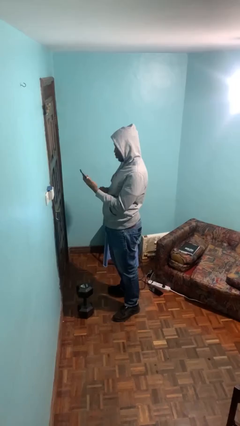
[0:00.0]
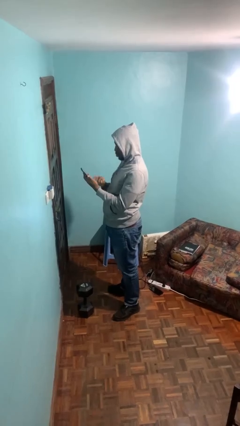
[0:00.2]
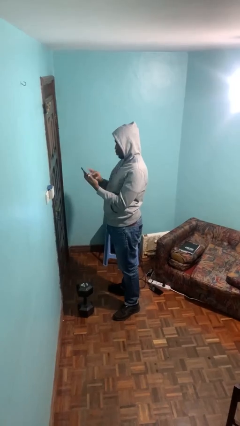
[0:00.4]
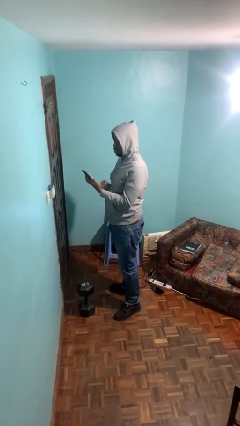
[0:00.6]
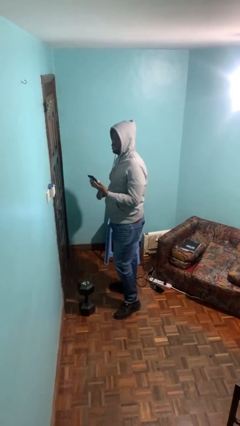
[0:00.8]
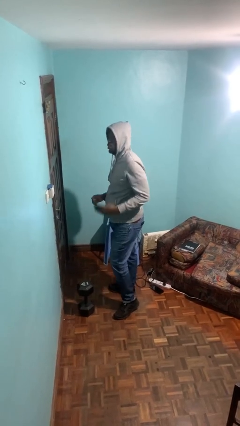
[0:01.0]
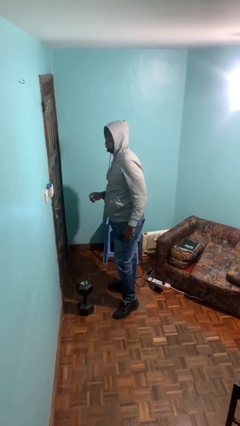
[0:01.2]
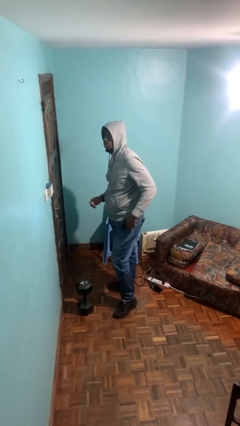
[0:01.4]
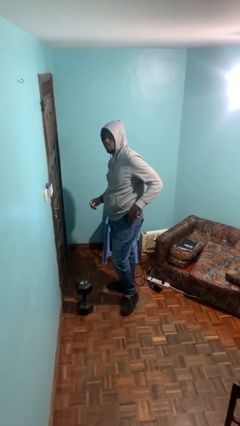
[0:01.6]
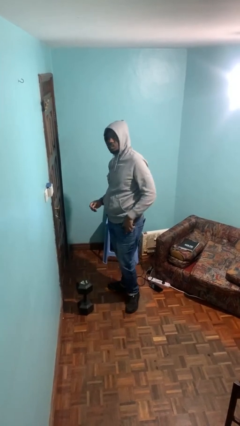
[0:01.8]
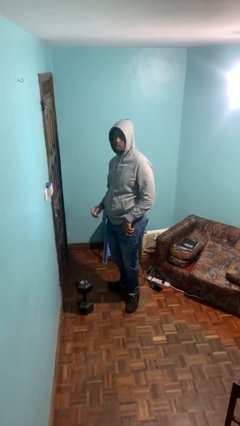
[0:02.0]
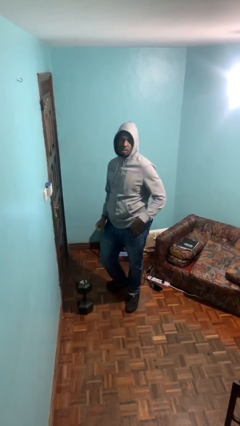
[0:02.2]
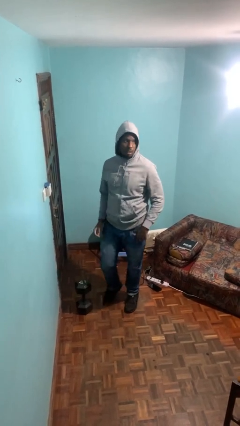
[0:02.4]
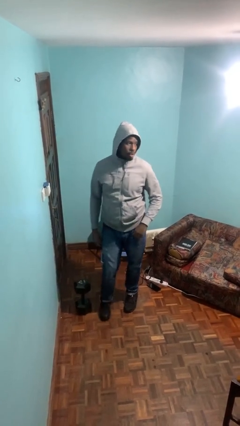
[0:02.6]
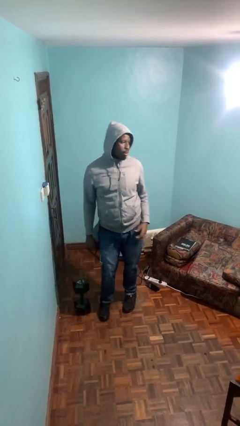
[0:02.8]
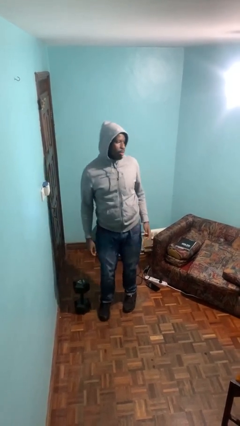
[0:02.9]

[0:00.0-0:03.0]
person puts phone into pocket

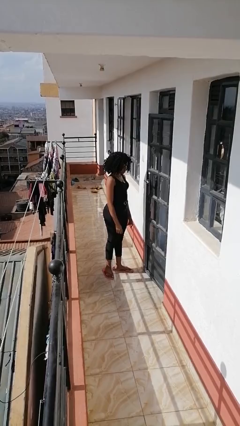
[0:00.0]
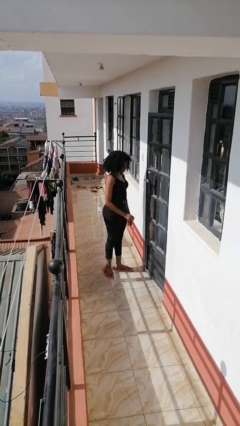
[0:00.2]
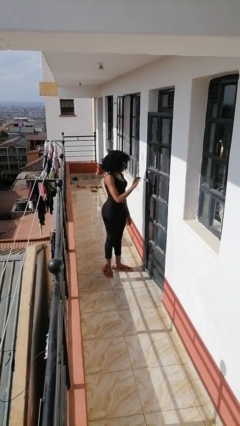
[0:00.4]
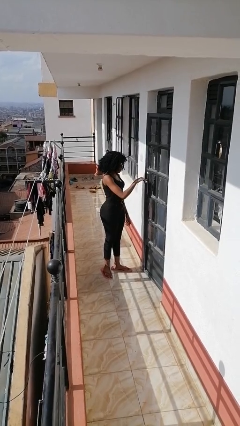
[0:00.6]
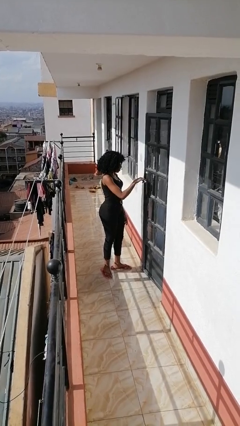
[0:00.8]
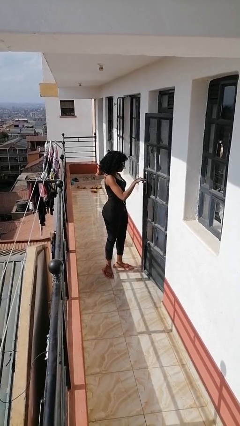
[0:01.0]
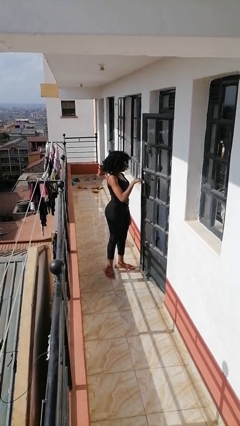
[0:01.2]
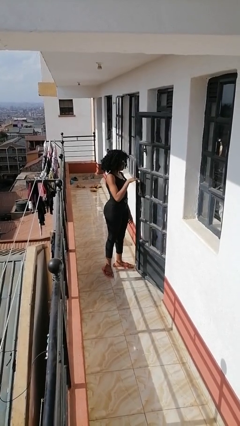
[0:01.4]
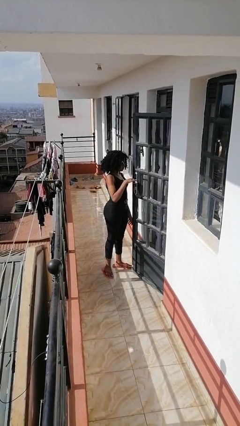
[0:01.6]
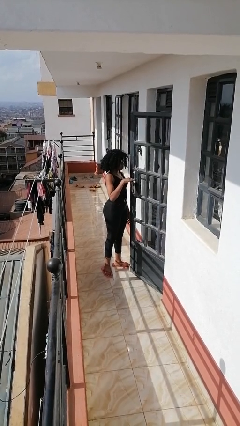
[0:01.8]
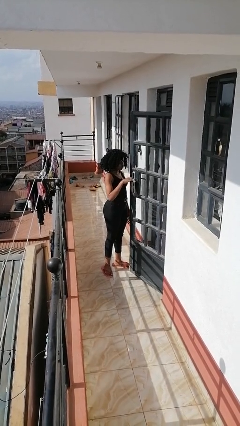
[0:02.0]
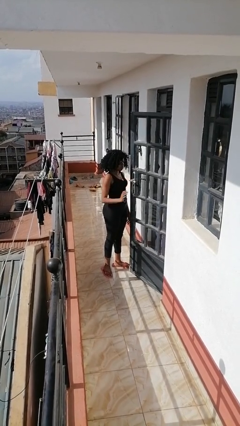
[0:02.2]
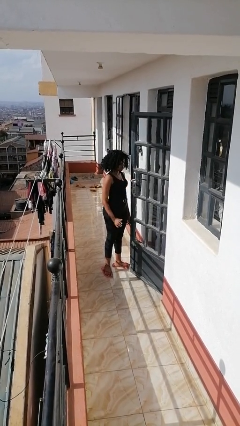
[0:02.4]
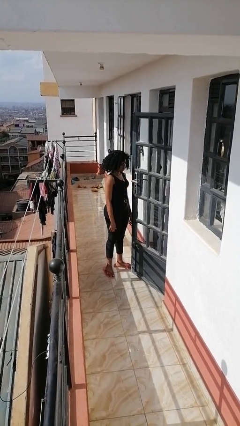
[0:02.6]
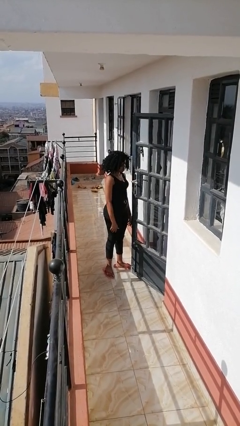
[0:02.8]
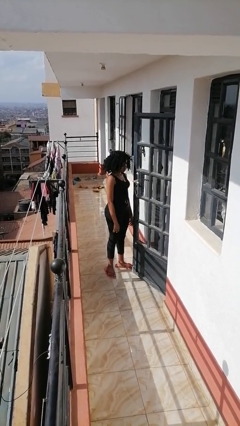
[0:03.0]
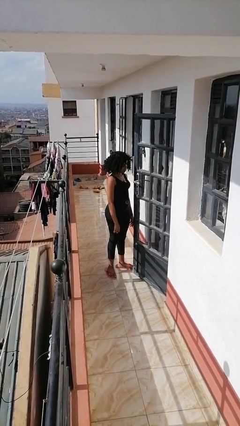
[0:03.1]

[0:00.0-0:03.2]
person opens facility door

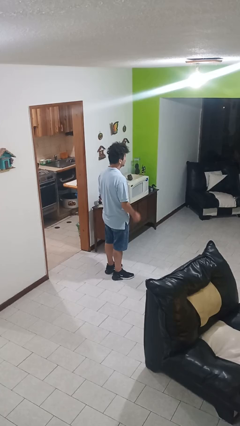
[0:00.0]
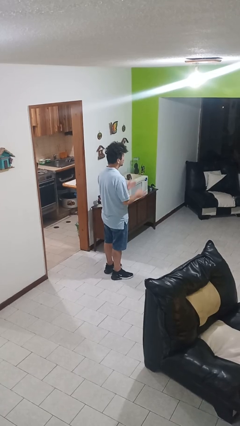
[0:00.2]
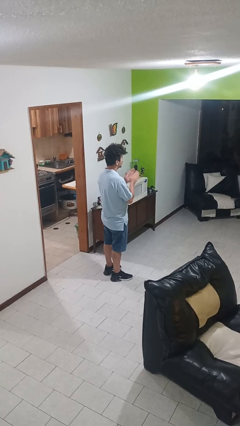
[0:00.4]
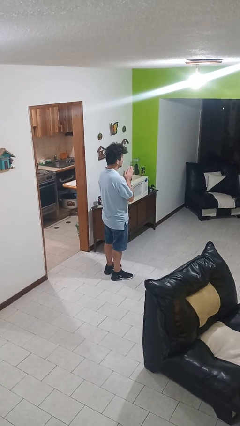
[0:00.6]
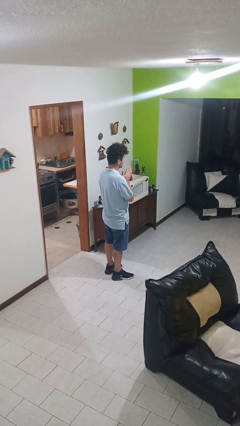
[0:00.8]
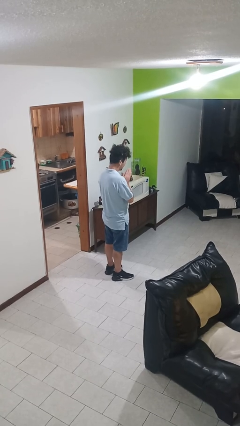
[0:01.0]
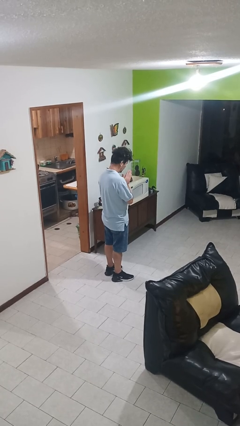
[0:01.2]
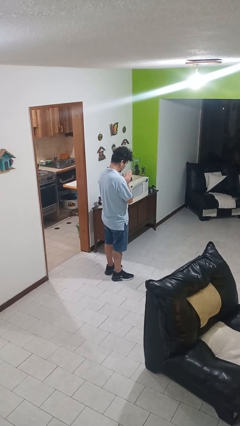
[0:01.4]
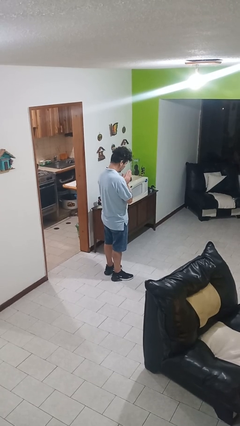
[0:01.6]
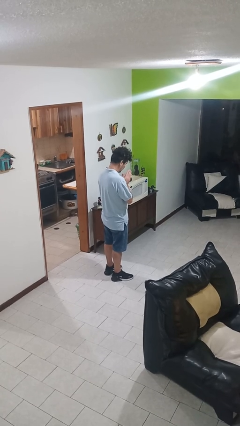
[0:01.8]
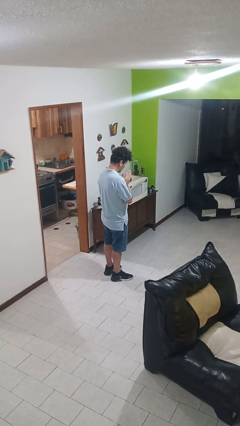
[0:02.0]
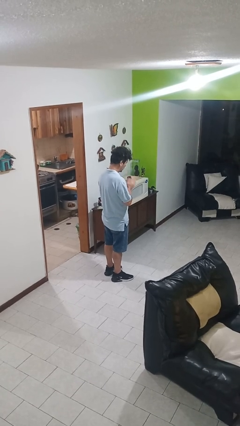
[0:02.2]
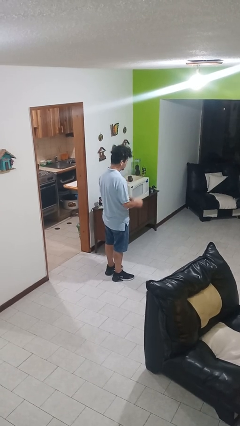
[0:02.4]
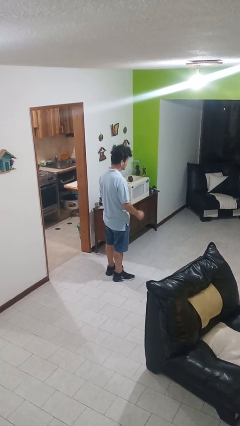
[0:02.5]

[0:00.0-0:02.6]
person prays

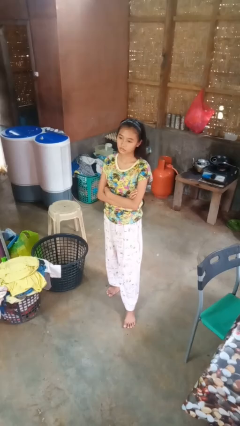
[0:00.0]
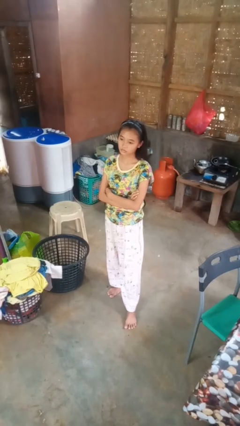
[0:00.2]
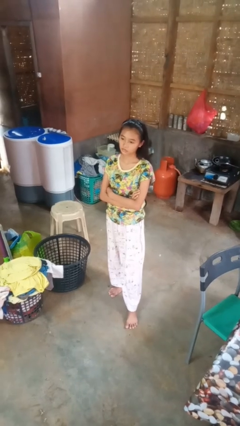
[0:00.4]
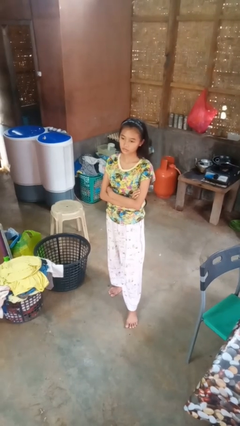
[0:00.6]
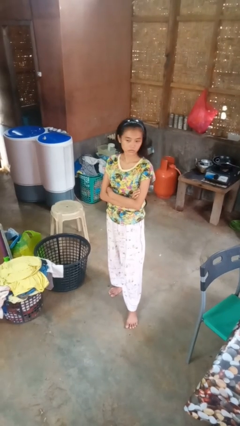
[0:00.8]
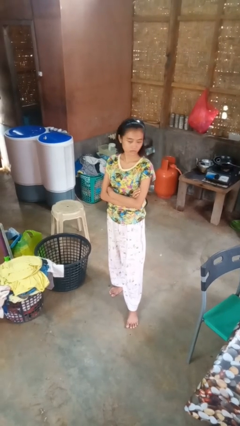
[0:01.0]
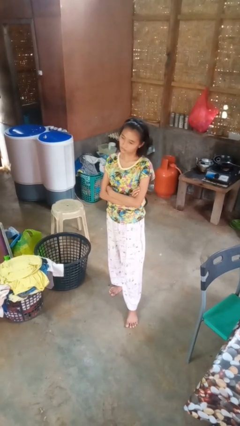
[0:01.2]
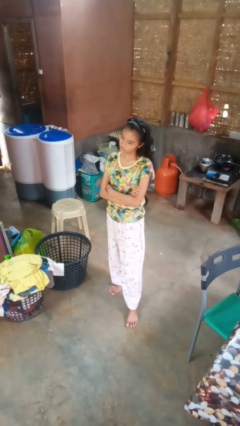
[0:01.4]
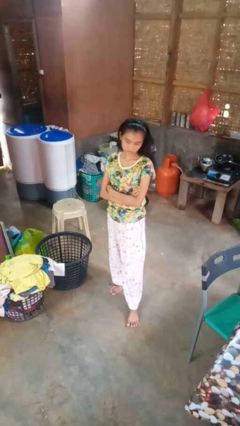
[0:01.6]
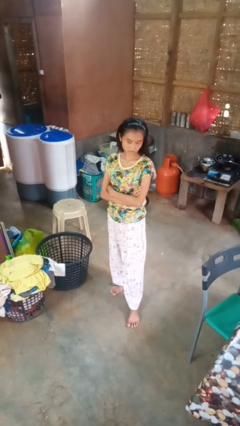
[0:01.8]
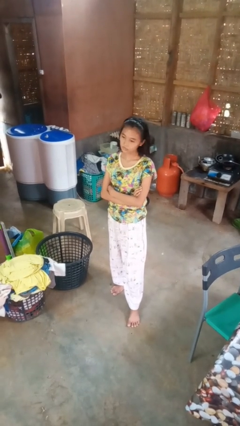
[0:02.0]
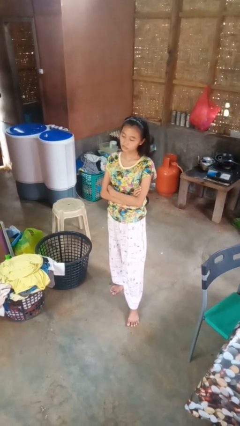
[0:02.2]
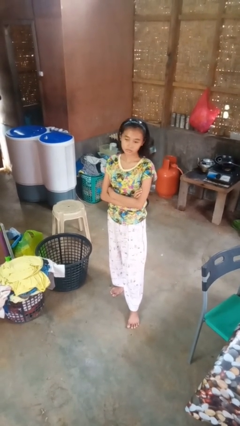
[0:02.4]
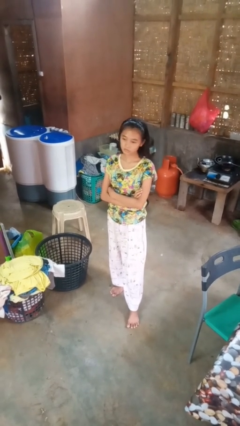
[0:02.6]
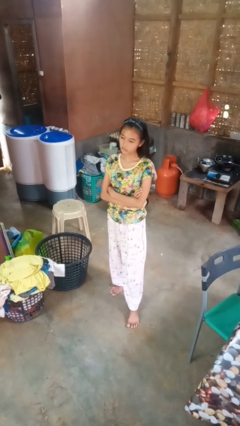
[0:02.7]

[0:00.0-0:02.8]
person shakes head

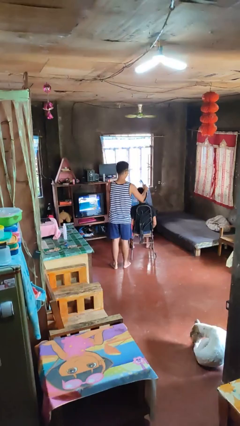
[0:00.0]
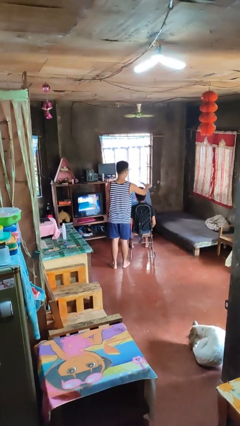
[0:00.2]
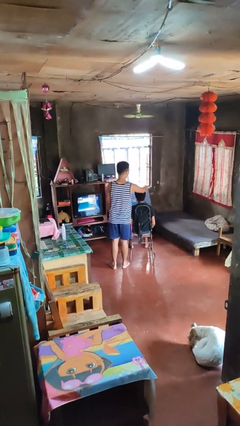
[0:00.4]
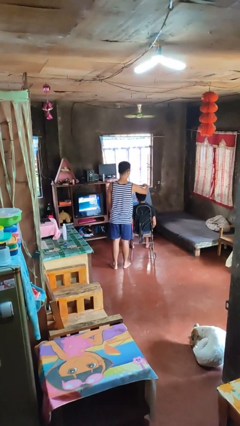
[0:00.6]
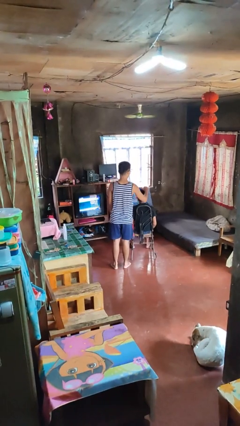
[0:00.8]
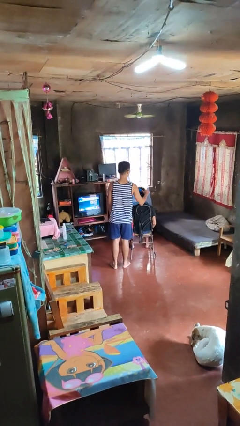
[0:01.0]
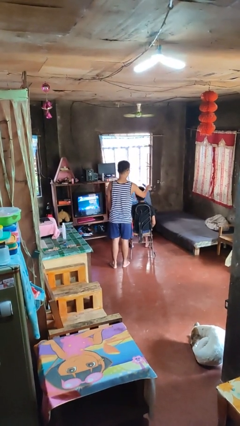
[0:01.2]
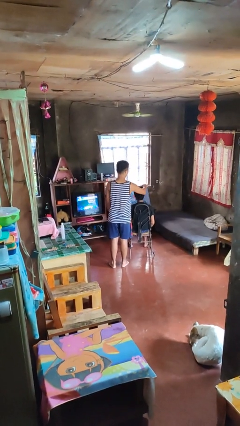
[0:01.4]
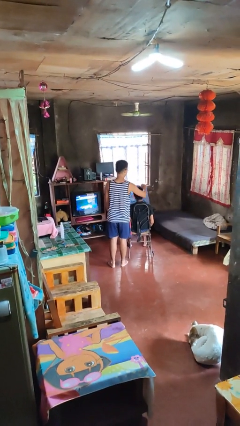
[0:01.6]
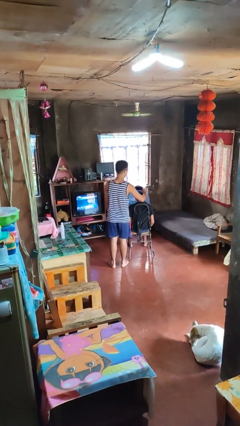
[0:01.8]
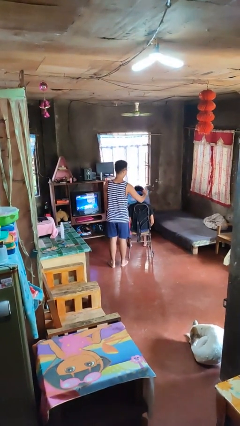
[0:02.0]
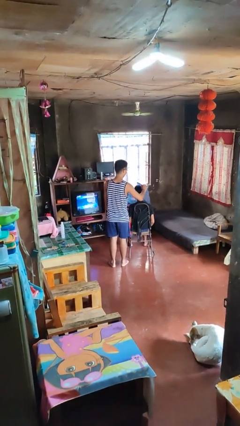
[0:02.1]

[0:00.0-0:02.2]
person brushes hair of person

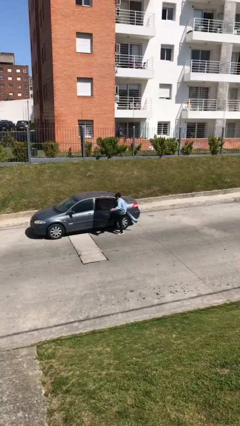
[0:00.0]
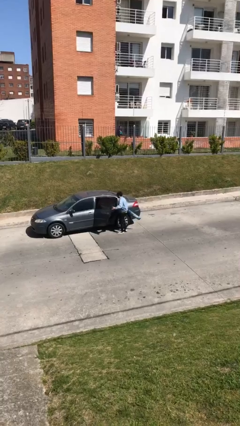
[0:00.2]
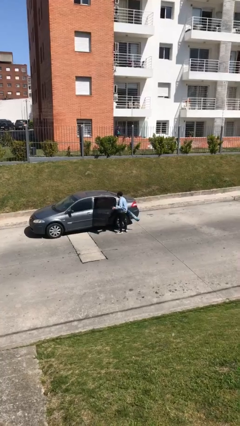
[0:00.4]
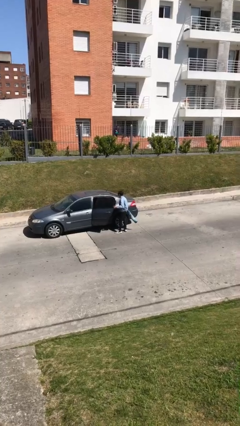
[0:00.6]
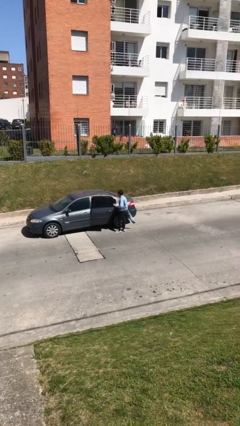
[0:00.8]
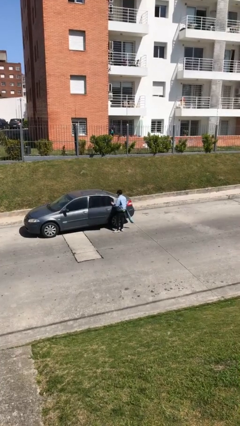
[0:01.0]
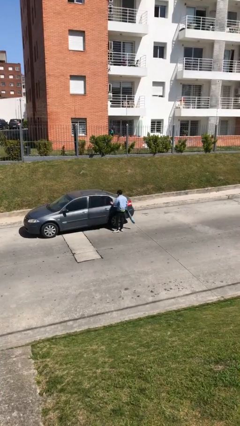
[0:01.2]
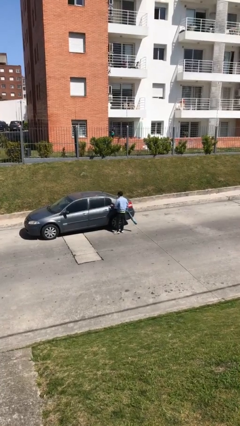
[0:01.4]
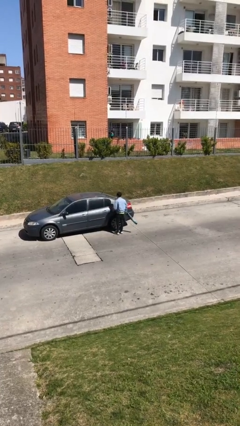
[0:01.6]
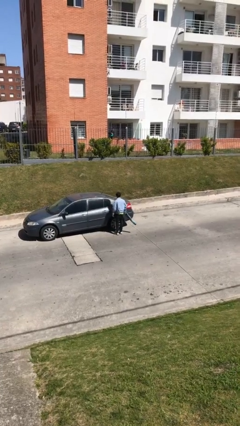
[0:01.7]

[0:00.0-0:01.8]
person closes car door

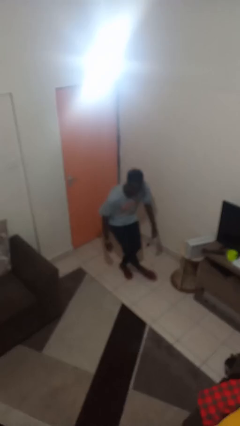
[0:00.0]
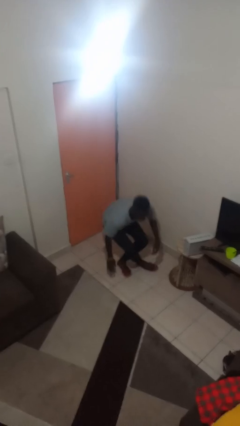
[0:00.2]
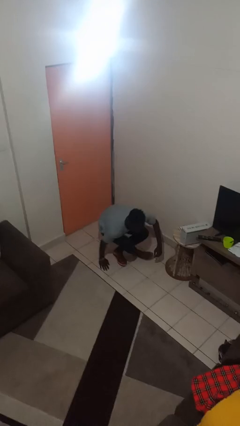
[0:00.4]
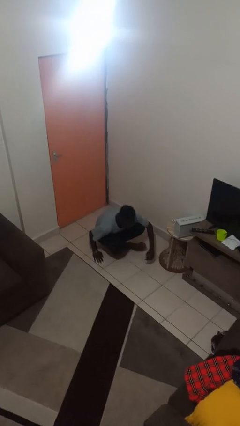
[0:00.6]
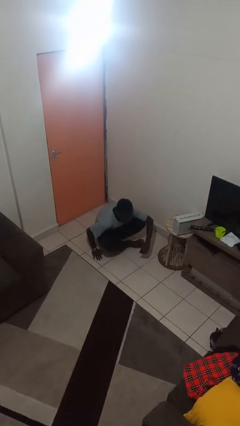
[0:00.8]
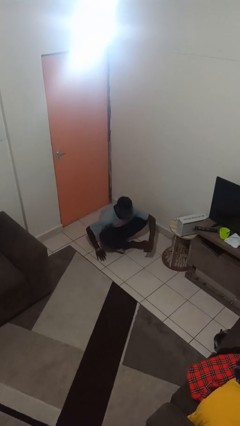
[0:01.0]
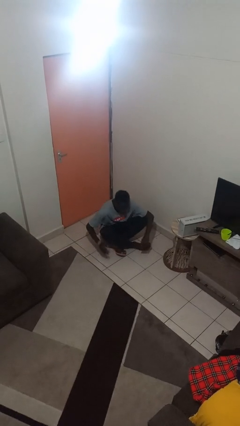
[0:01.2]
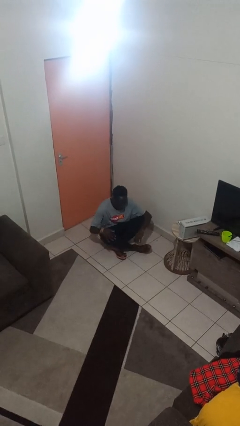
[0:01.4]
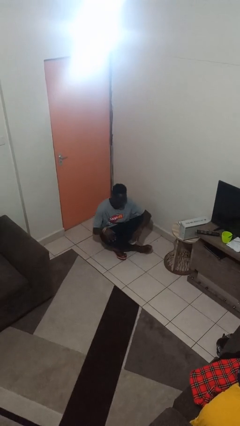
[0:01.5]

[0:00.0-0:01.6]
person sits crisscross
